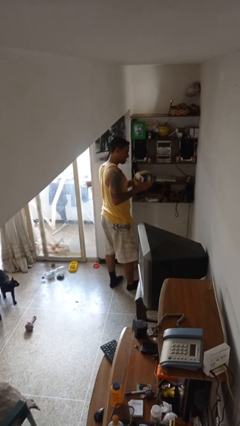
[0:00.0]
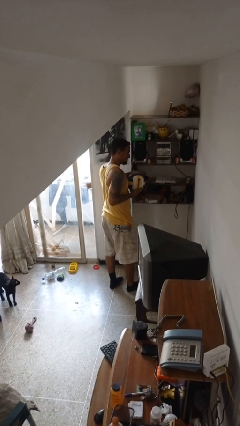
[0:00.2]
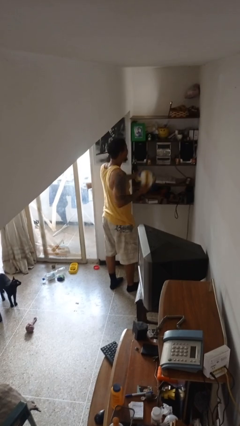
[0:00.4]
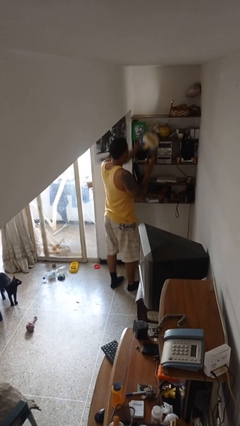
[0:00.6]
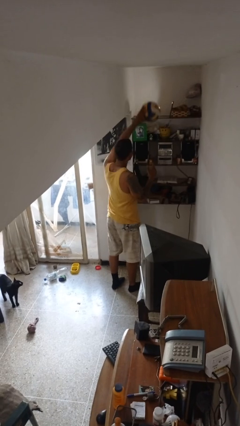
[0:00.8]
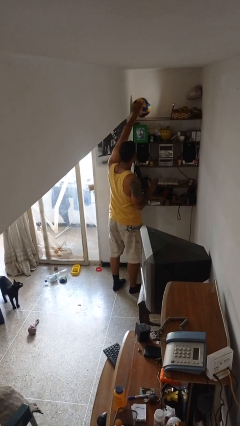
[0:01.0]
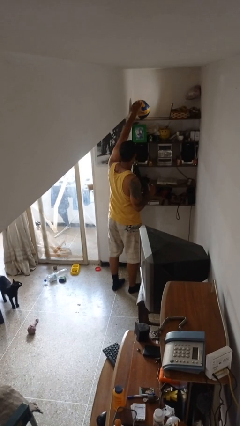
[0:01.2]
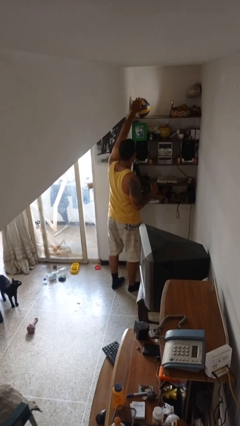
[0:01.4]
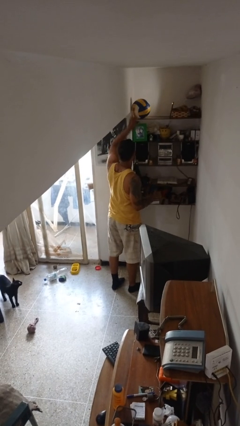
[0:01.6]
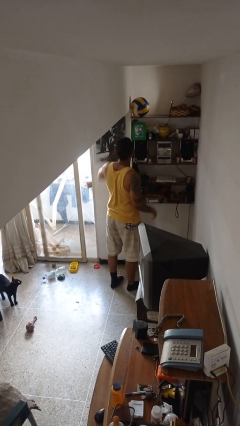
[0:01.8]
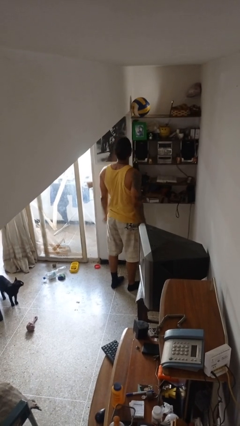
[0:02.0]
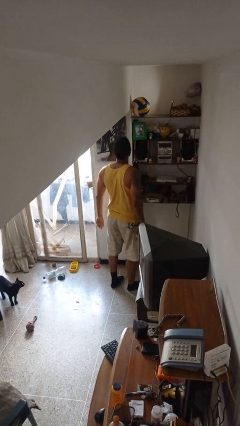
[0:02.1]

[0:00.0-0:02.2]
person puts down object on shelf

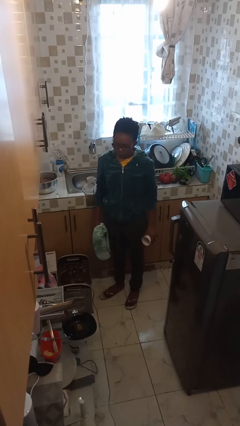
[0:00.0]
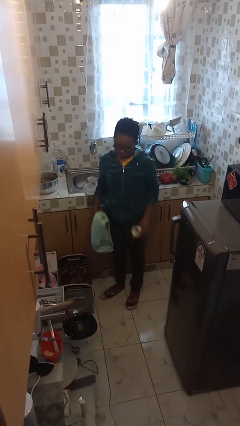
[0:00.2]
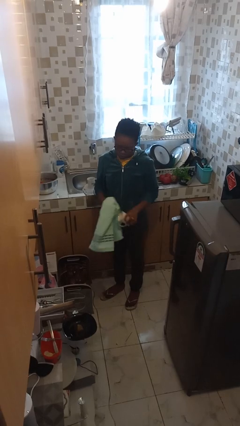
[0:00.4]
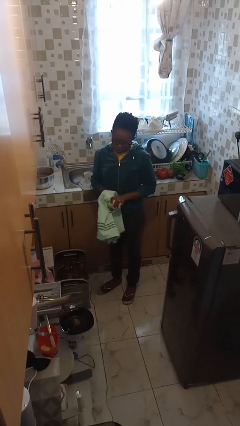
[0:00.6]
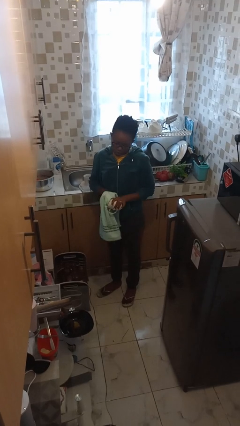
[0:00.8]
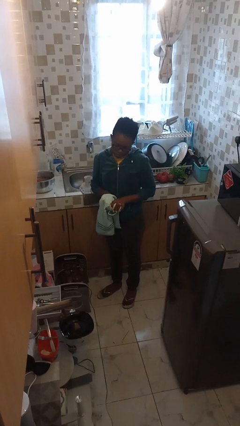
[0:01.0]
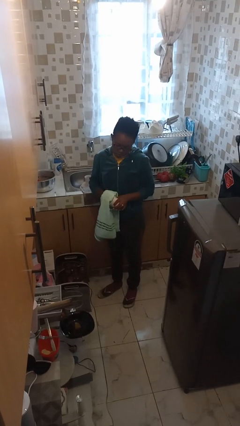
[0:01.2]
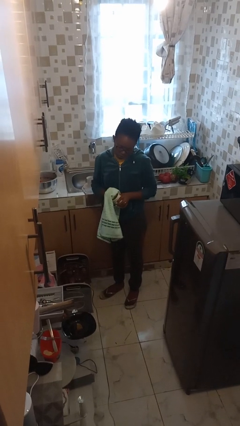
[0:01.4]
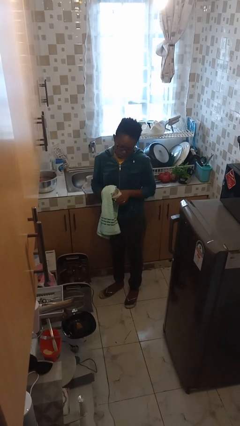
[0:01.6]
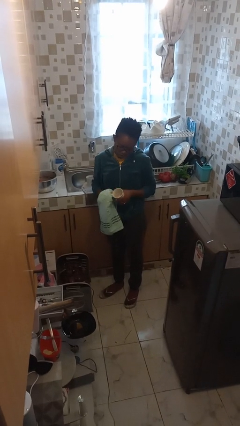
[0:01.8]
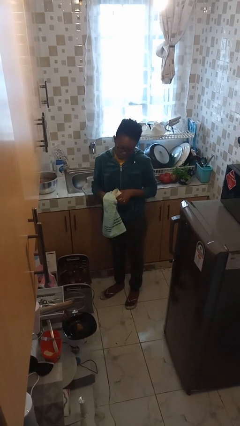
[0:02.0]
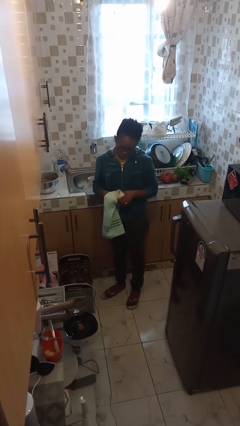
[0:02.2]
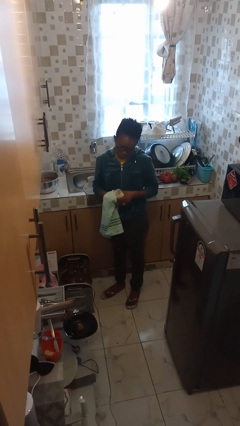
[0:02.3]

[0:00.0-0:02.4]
person dries dish

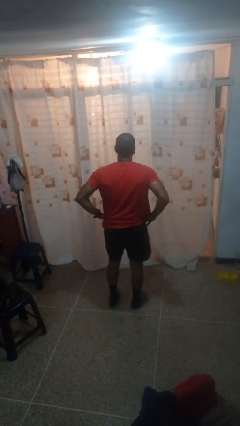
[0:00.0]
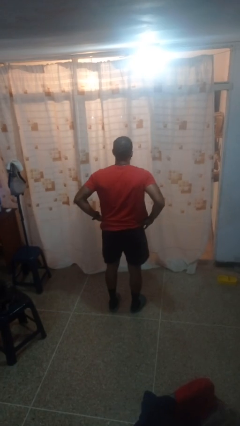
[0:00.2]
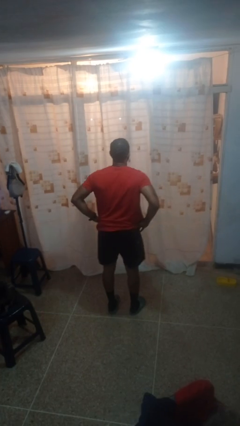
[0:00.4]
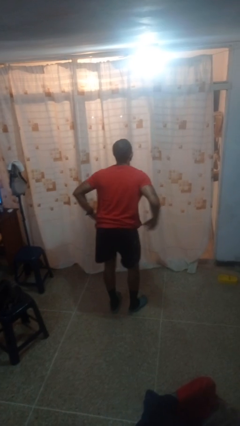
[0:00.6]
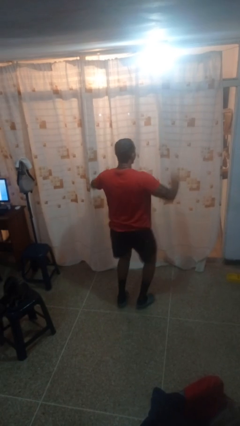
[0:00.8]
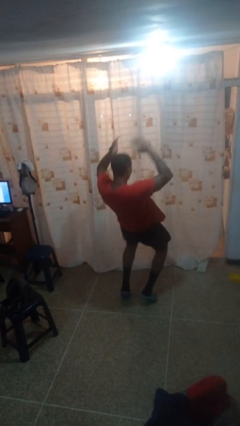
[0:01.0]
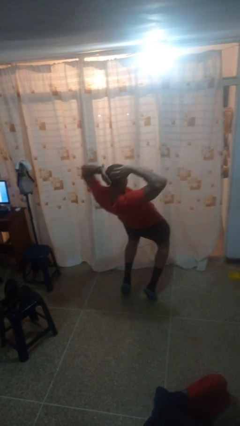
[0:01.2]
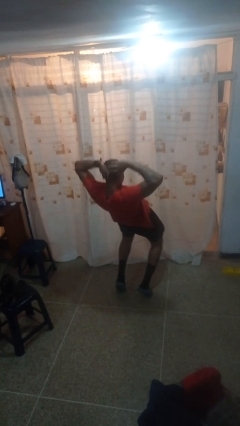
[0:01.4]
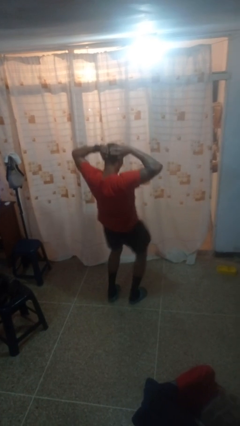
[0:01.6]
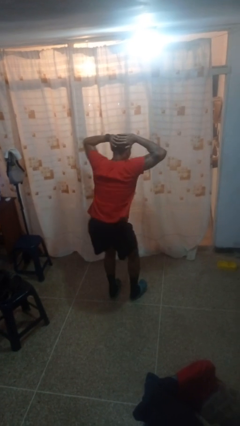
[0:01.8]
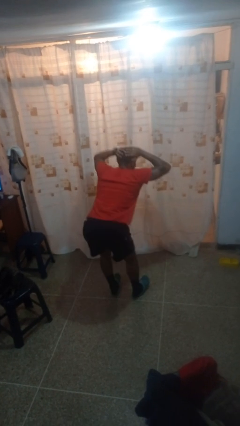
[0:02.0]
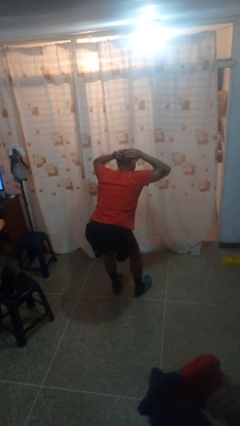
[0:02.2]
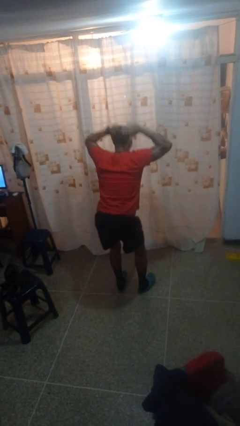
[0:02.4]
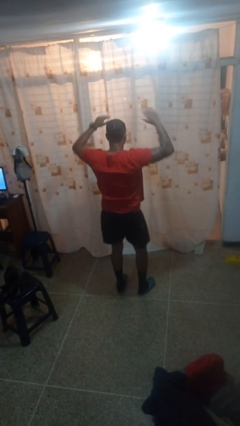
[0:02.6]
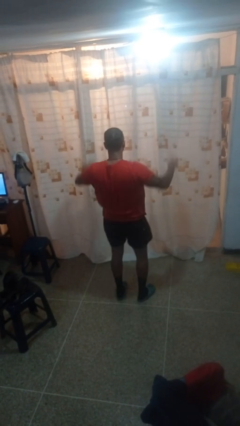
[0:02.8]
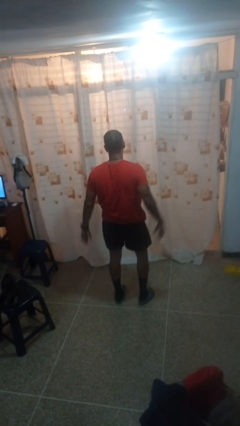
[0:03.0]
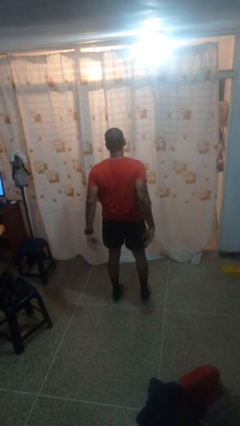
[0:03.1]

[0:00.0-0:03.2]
person wiggles hips

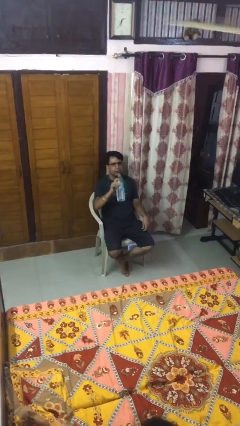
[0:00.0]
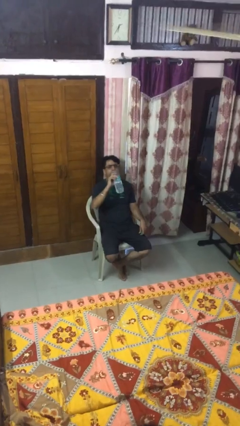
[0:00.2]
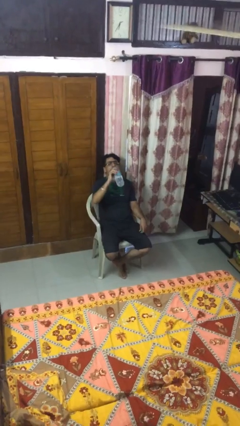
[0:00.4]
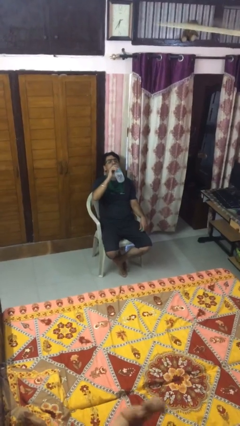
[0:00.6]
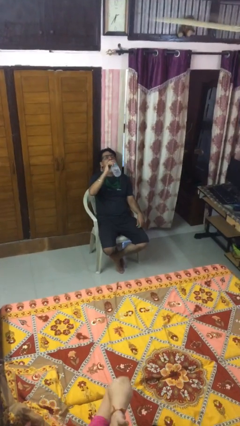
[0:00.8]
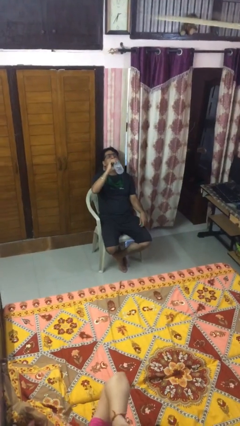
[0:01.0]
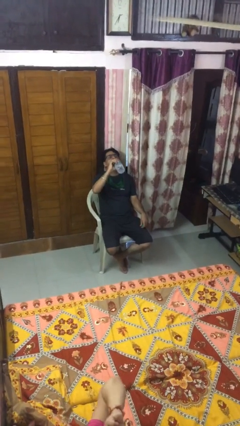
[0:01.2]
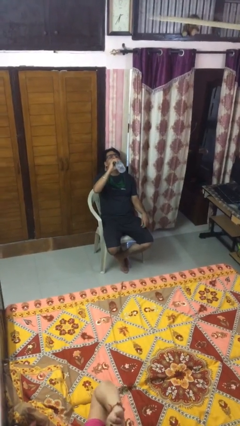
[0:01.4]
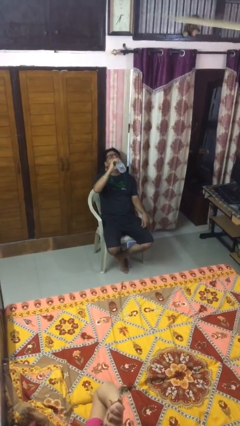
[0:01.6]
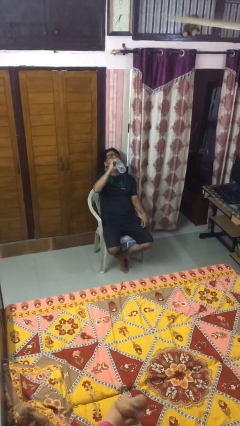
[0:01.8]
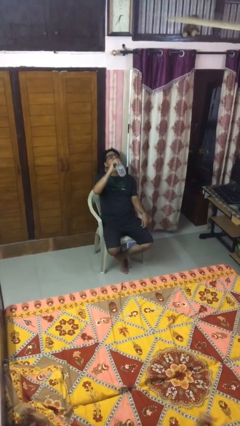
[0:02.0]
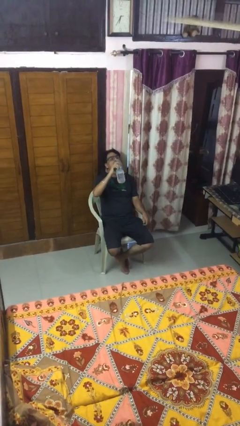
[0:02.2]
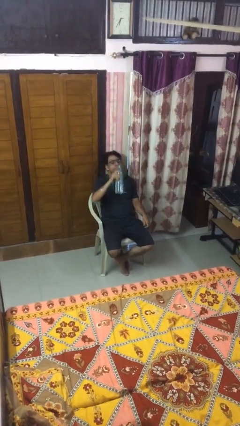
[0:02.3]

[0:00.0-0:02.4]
person drinks from bottle

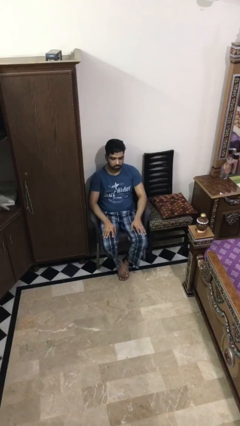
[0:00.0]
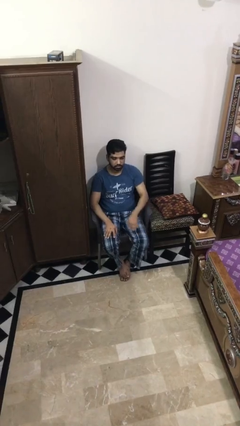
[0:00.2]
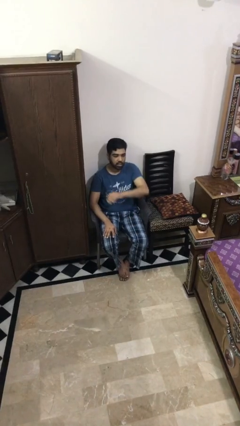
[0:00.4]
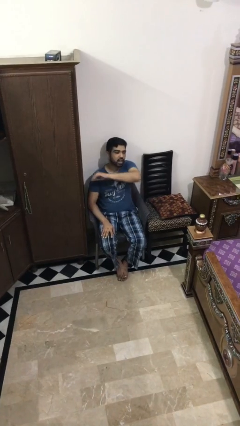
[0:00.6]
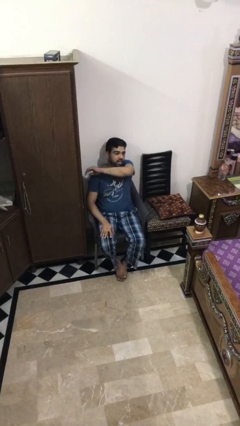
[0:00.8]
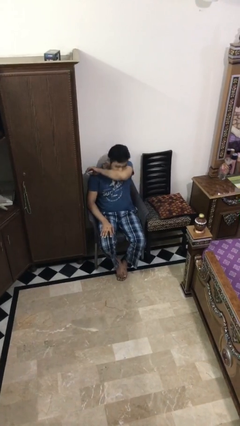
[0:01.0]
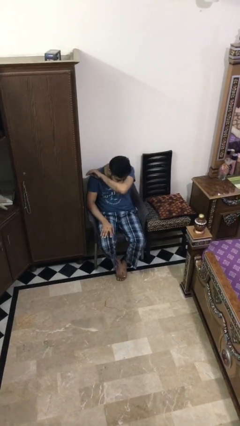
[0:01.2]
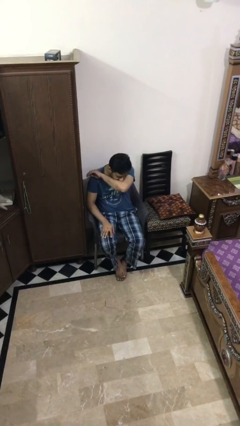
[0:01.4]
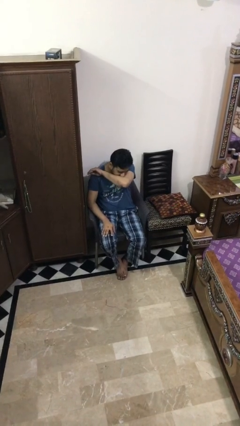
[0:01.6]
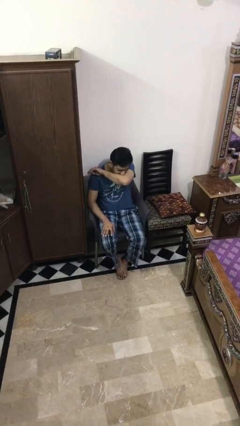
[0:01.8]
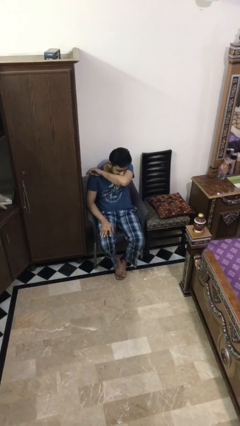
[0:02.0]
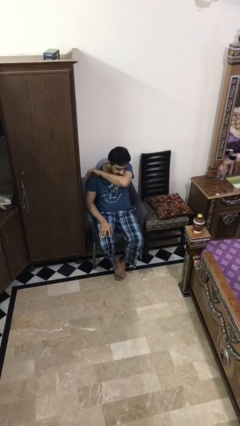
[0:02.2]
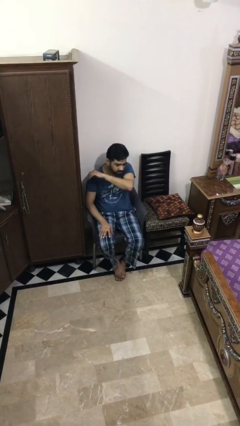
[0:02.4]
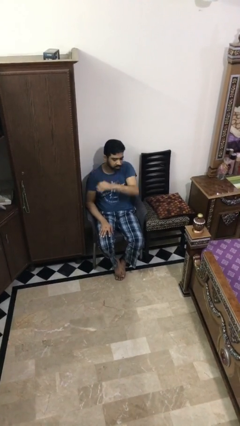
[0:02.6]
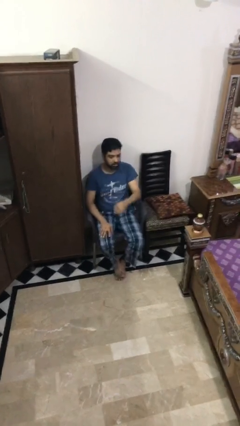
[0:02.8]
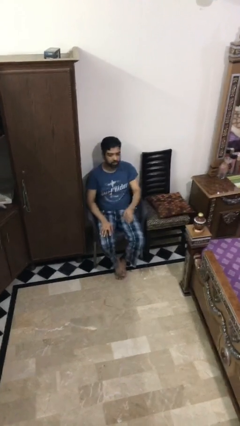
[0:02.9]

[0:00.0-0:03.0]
person sneezes into arm

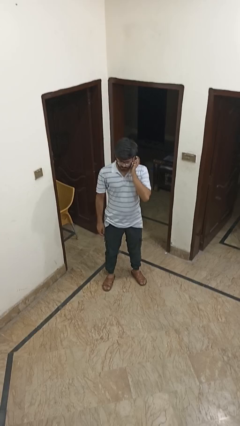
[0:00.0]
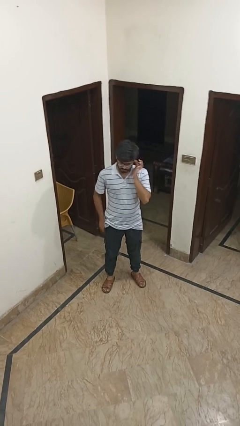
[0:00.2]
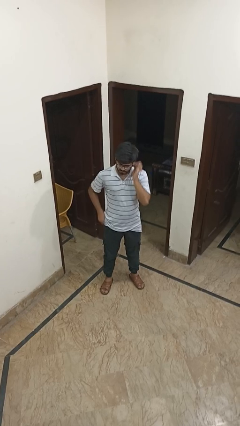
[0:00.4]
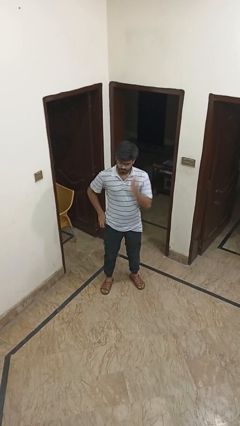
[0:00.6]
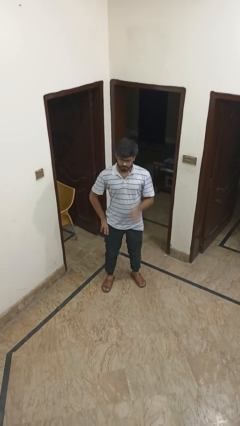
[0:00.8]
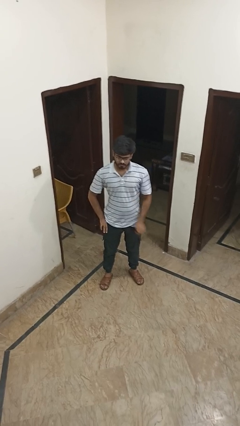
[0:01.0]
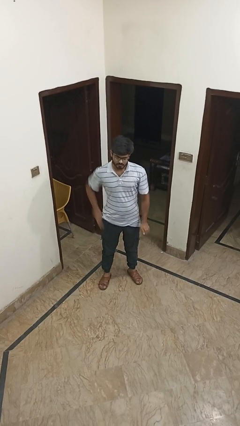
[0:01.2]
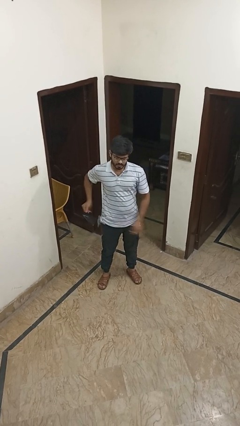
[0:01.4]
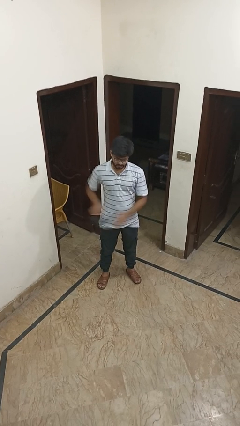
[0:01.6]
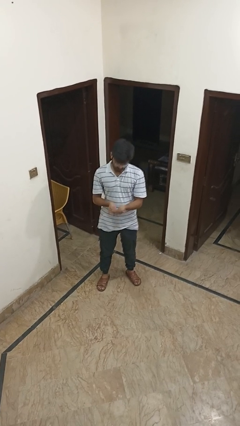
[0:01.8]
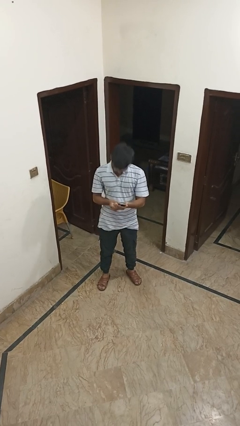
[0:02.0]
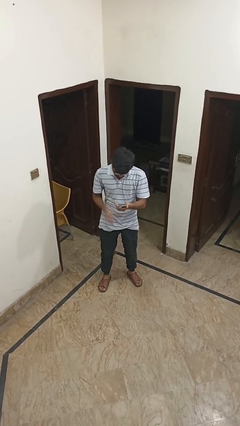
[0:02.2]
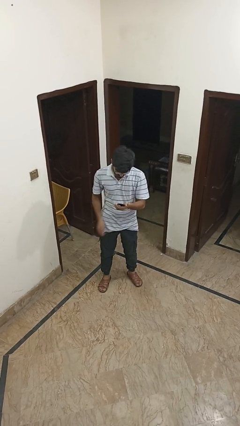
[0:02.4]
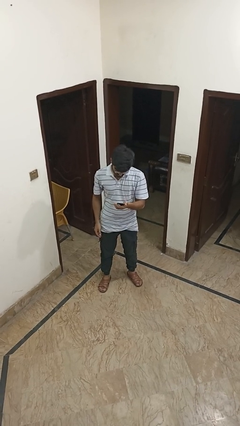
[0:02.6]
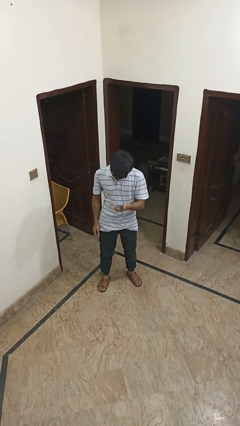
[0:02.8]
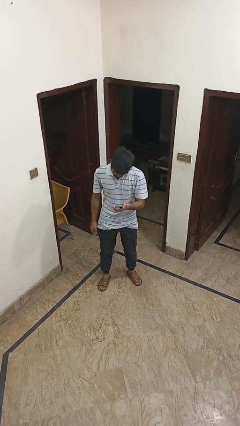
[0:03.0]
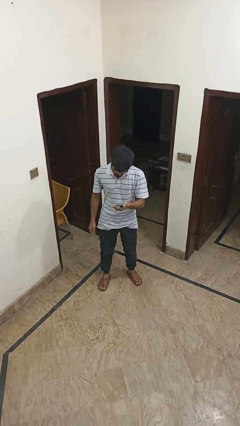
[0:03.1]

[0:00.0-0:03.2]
person takes phone from pocket

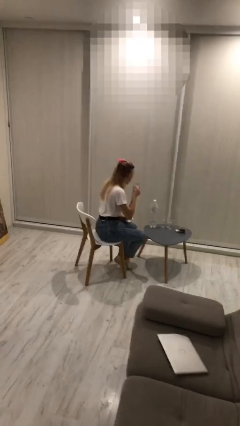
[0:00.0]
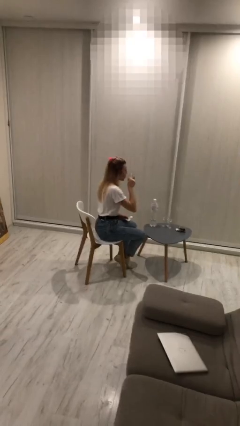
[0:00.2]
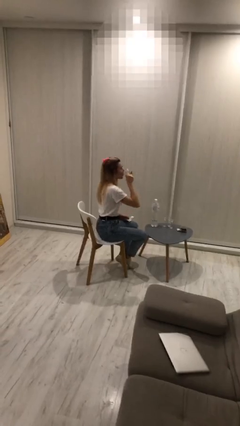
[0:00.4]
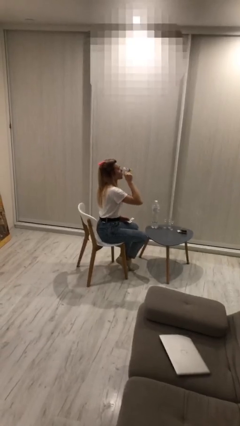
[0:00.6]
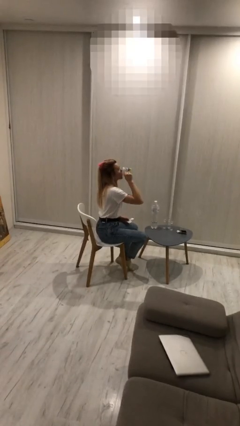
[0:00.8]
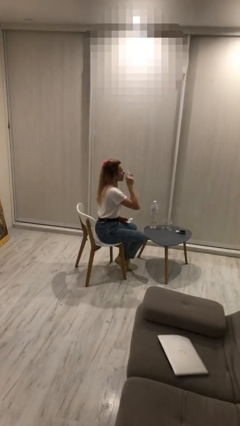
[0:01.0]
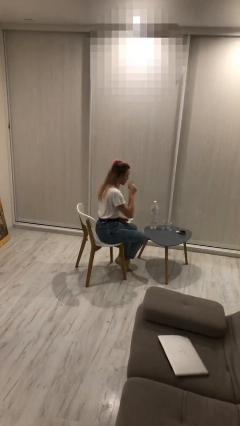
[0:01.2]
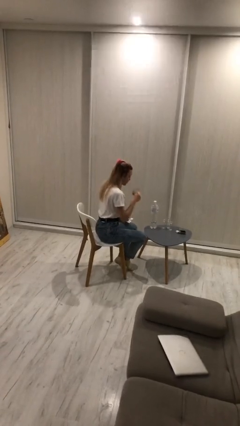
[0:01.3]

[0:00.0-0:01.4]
person drinks from cup
